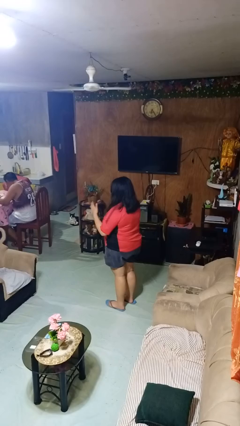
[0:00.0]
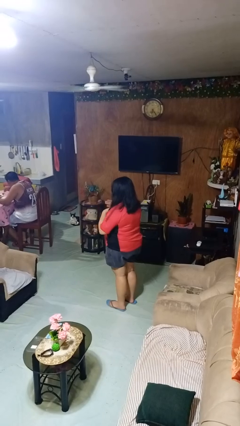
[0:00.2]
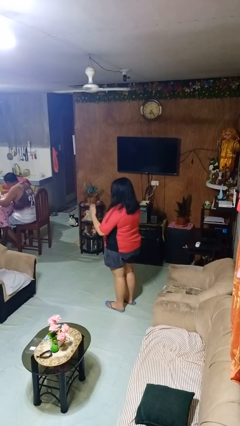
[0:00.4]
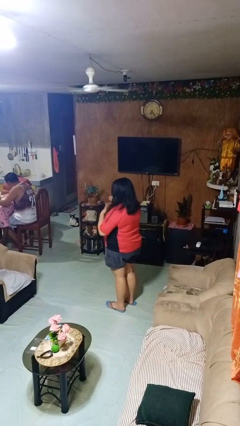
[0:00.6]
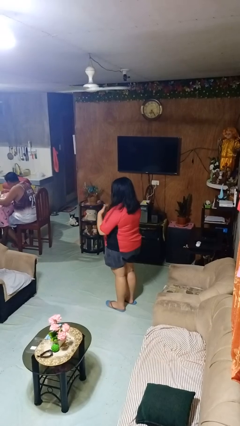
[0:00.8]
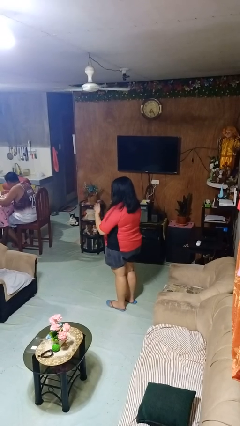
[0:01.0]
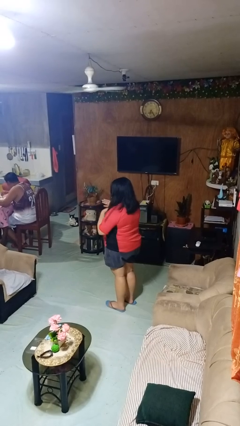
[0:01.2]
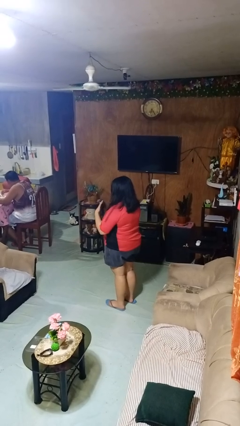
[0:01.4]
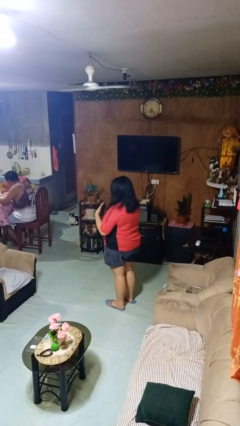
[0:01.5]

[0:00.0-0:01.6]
person drums on chest

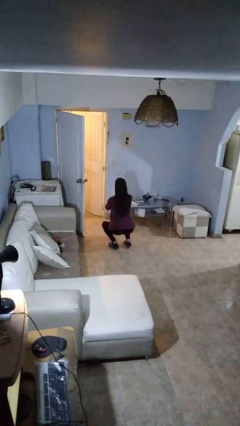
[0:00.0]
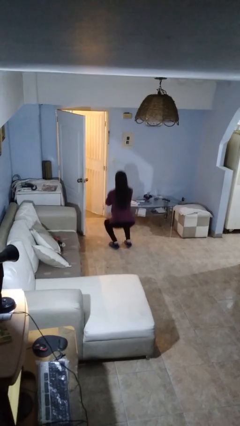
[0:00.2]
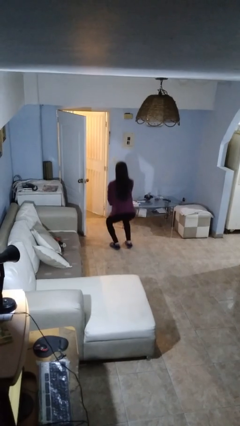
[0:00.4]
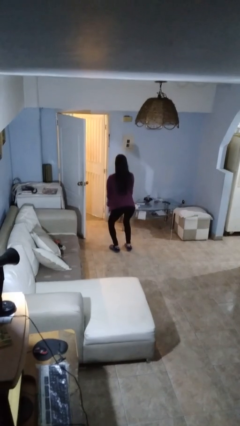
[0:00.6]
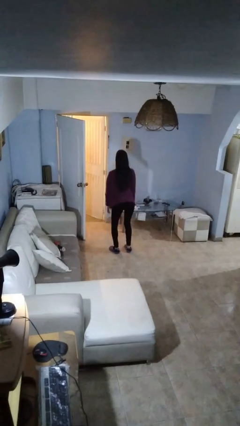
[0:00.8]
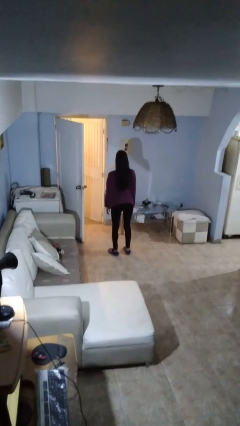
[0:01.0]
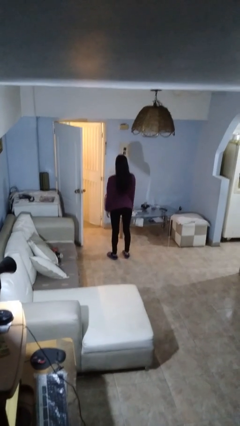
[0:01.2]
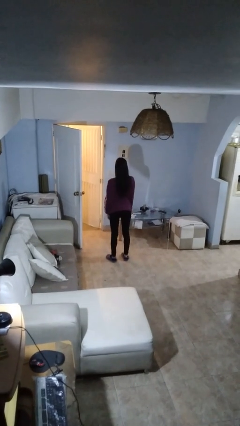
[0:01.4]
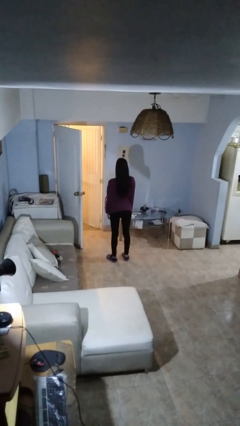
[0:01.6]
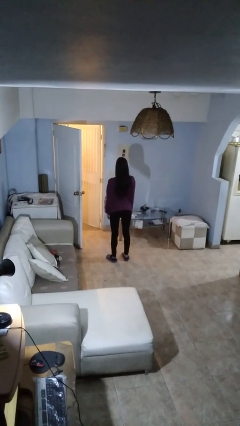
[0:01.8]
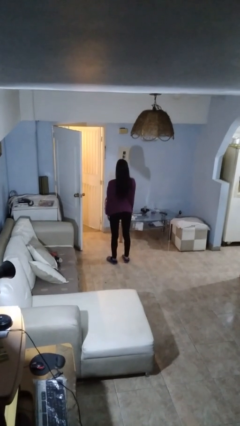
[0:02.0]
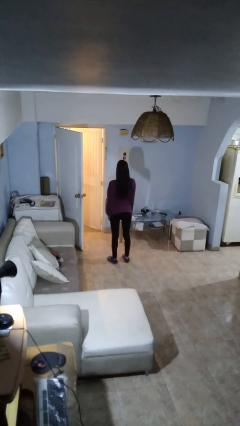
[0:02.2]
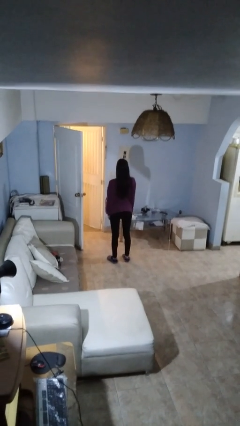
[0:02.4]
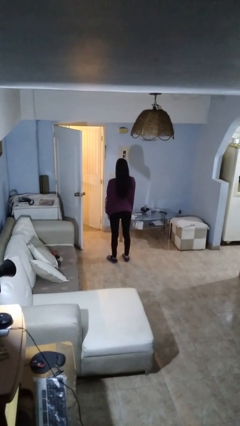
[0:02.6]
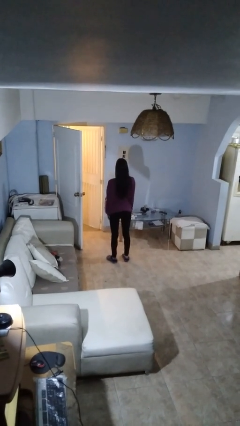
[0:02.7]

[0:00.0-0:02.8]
person stands up

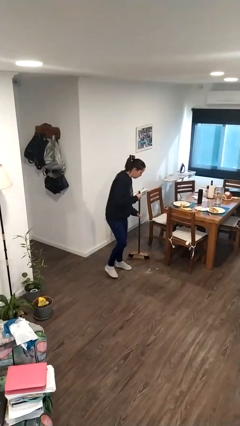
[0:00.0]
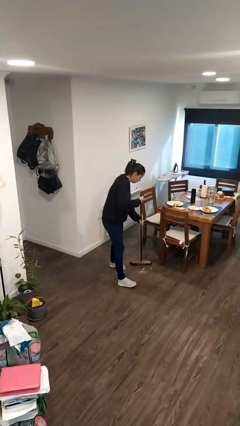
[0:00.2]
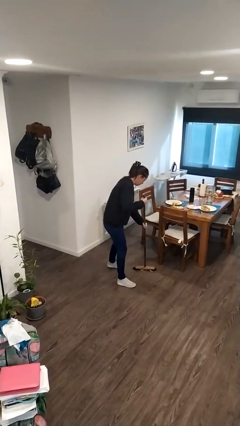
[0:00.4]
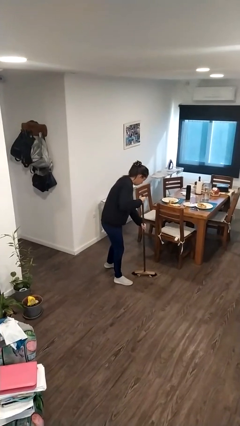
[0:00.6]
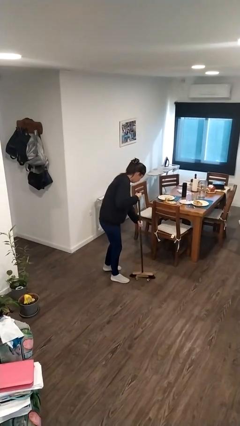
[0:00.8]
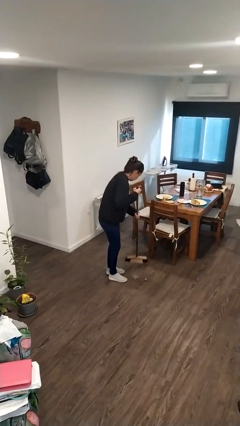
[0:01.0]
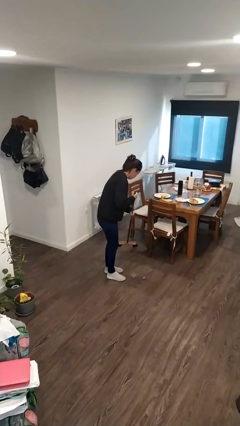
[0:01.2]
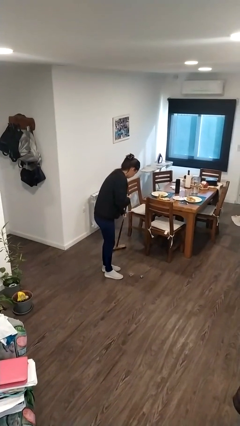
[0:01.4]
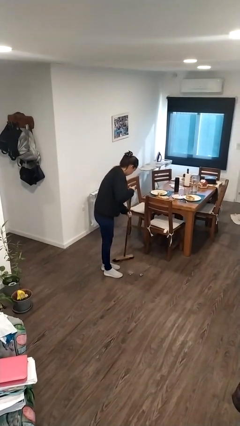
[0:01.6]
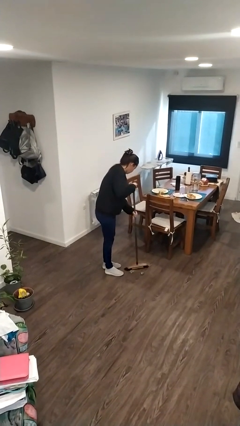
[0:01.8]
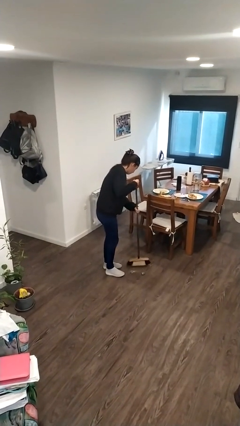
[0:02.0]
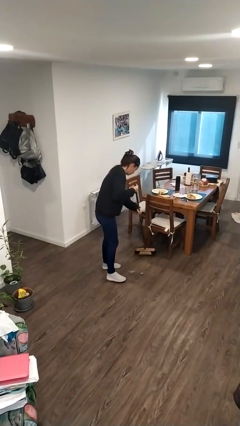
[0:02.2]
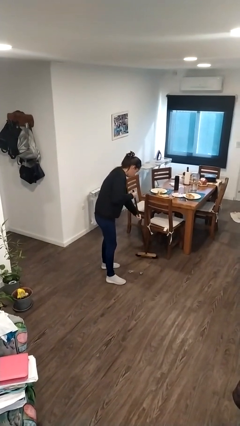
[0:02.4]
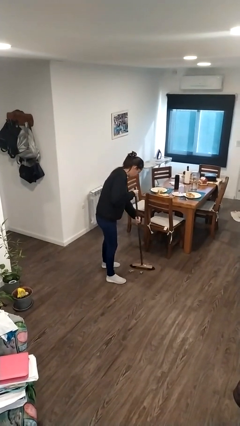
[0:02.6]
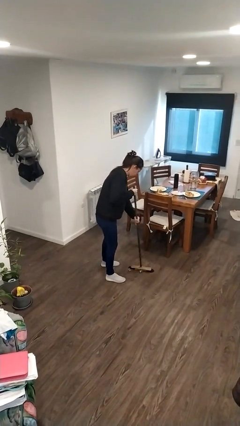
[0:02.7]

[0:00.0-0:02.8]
person sweeps floor

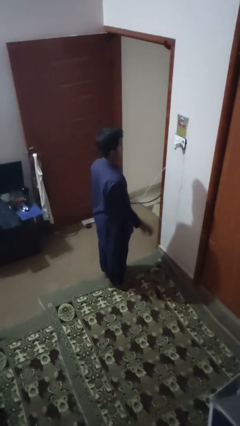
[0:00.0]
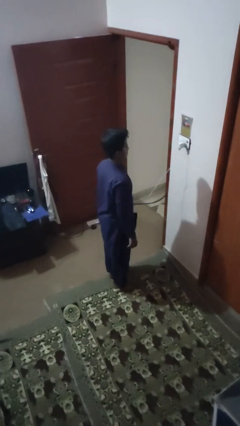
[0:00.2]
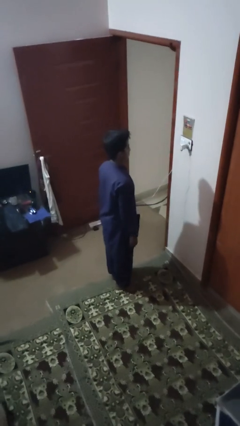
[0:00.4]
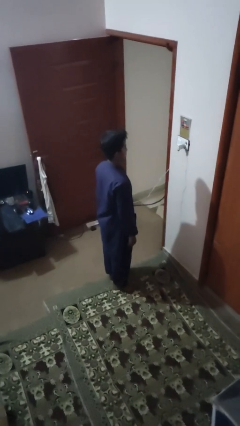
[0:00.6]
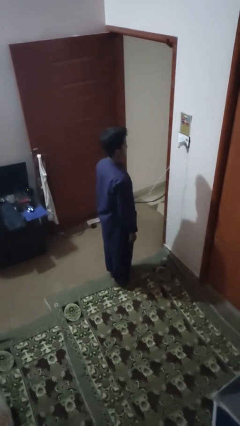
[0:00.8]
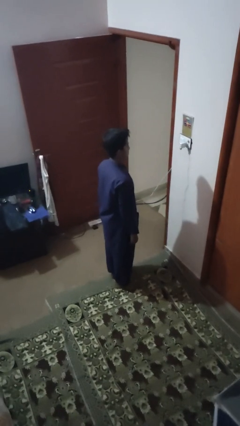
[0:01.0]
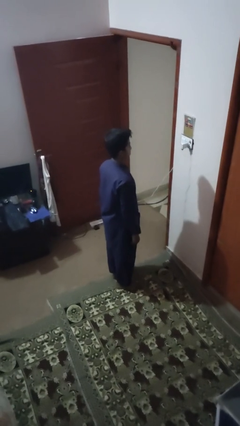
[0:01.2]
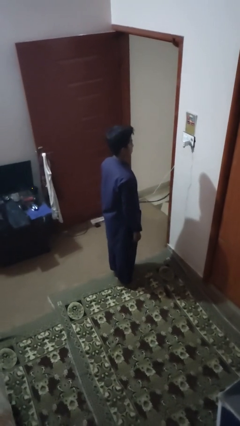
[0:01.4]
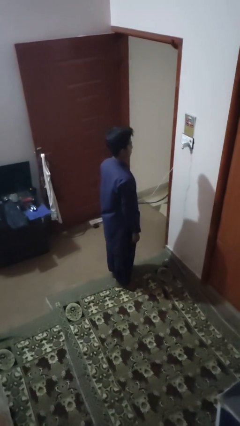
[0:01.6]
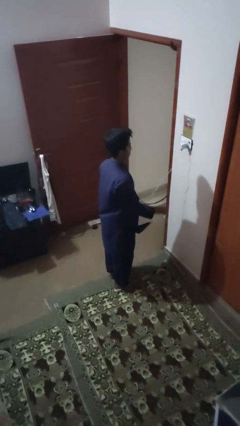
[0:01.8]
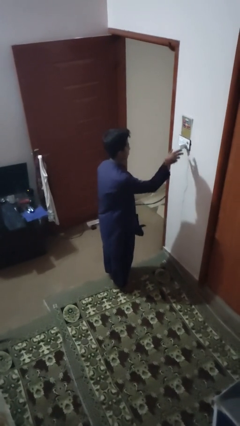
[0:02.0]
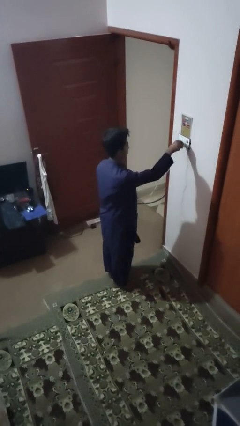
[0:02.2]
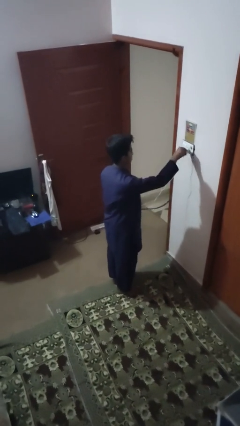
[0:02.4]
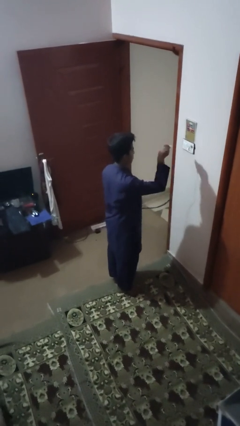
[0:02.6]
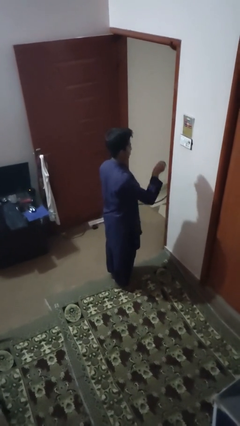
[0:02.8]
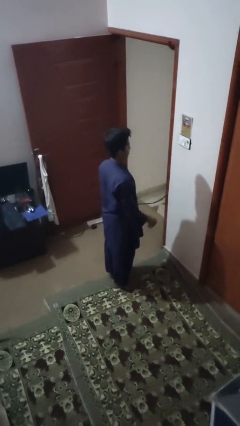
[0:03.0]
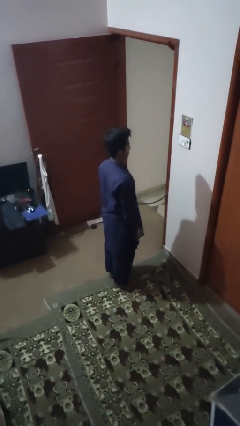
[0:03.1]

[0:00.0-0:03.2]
person unplugs from electrical socket

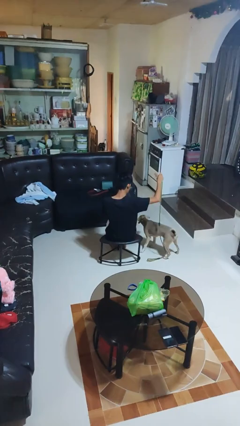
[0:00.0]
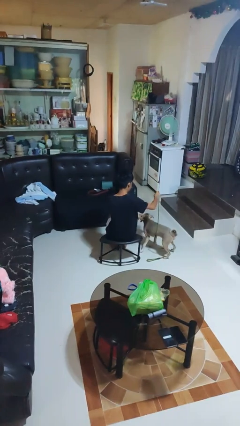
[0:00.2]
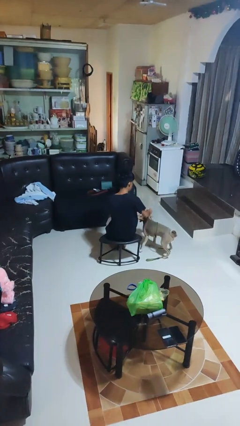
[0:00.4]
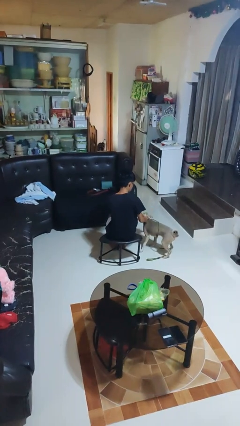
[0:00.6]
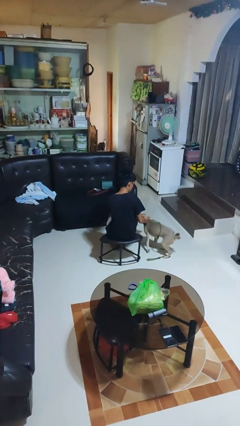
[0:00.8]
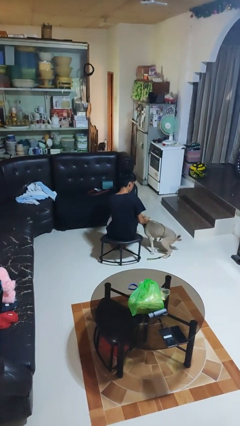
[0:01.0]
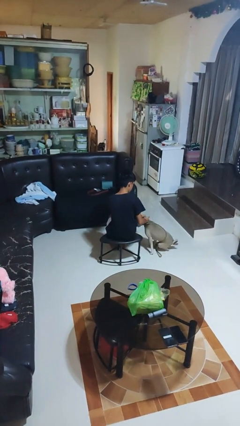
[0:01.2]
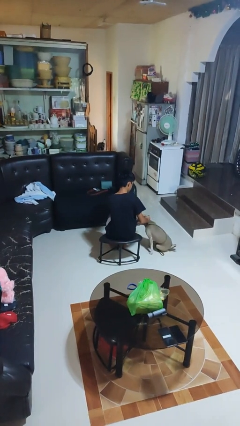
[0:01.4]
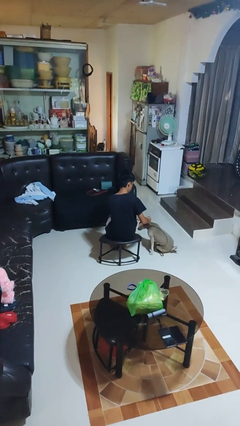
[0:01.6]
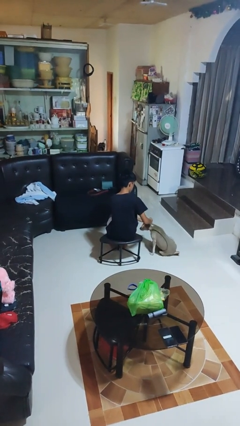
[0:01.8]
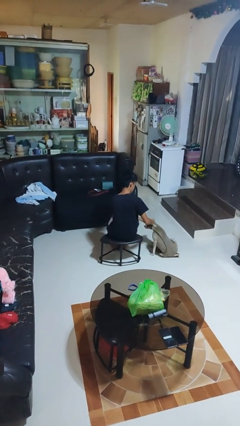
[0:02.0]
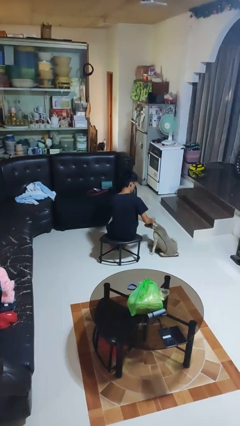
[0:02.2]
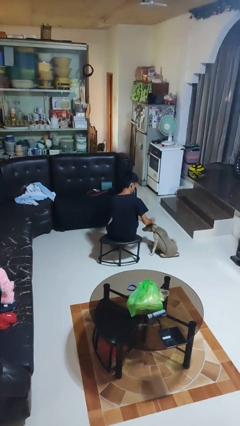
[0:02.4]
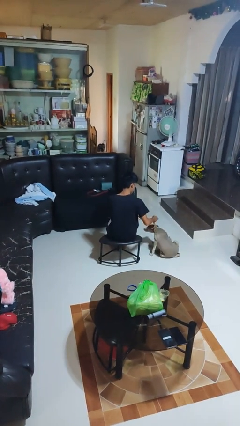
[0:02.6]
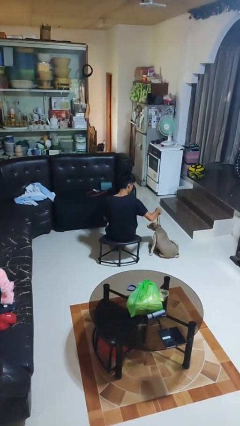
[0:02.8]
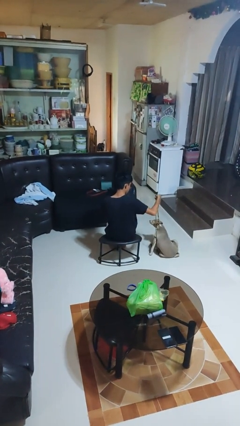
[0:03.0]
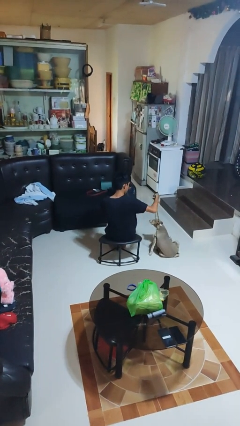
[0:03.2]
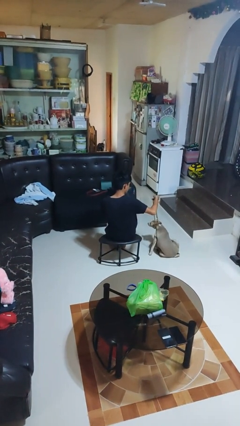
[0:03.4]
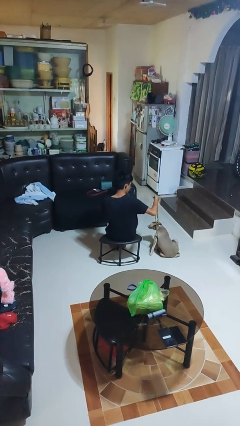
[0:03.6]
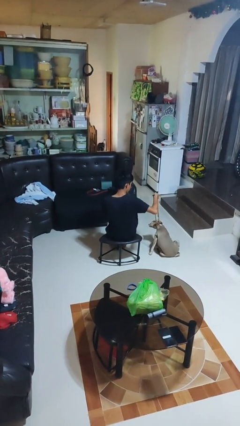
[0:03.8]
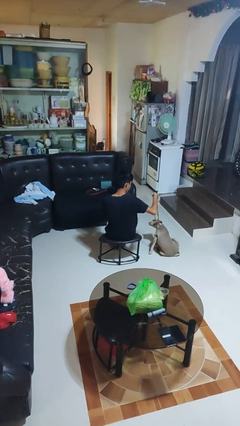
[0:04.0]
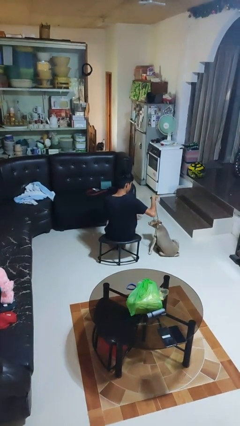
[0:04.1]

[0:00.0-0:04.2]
person attaches leash to dog

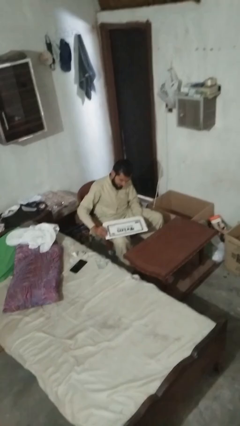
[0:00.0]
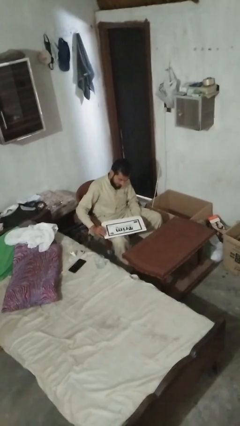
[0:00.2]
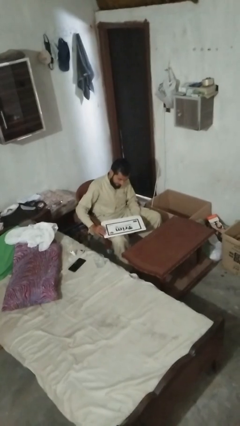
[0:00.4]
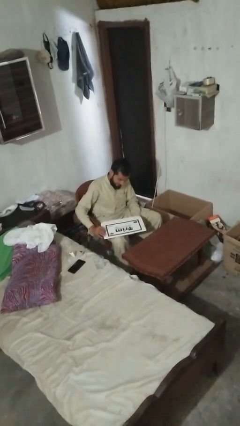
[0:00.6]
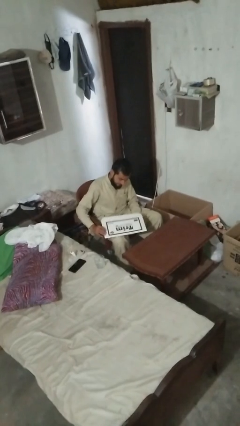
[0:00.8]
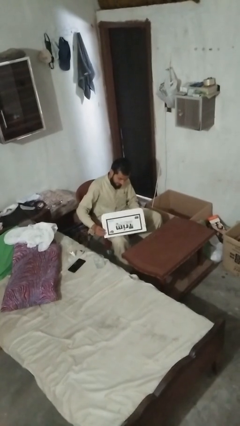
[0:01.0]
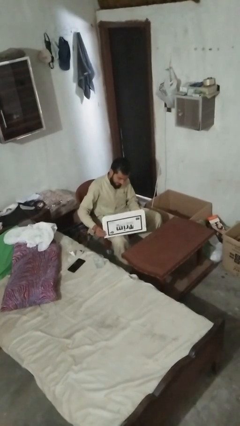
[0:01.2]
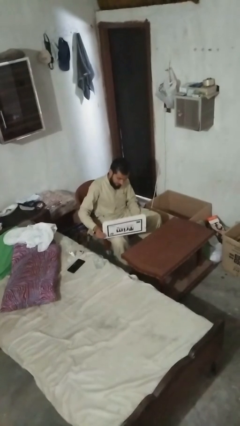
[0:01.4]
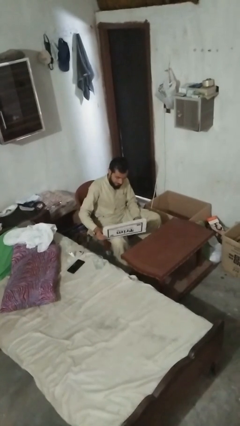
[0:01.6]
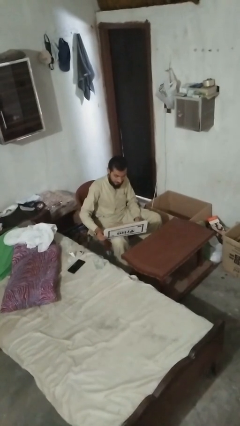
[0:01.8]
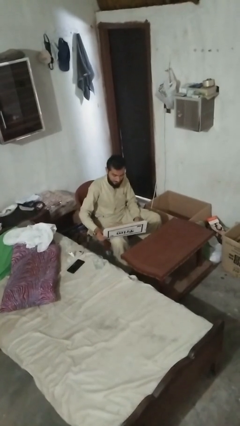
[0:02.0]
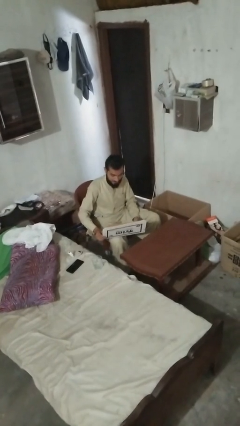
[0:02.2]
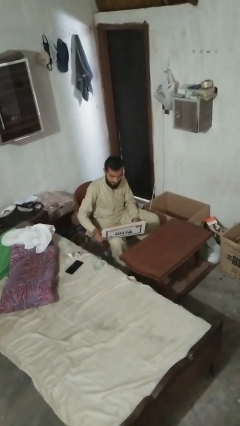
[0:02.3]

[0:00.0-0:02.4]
person opens laptop

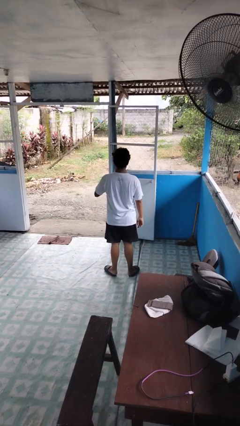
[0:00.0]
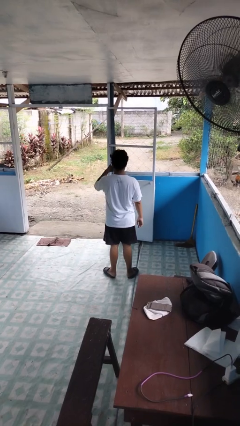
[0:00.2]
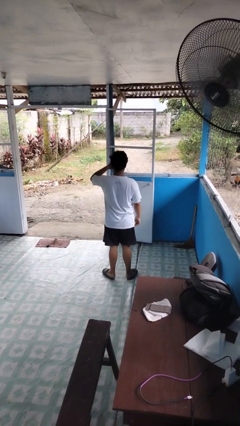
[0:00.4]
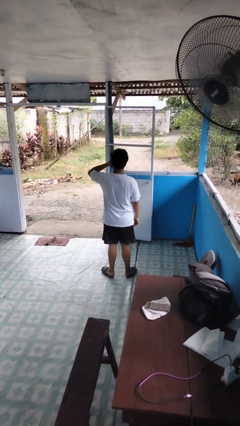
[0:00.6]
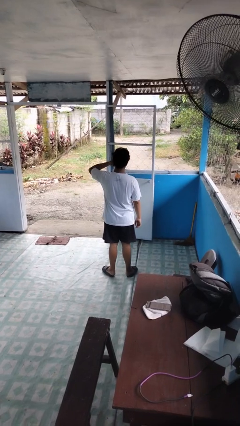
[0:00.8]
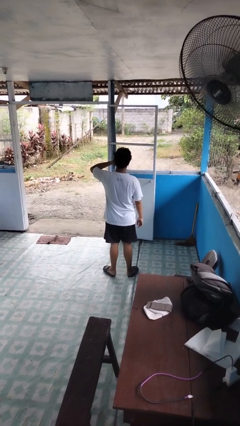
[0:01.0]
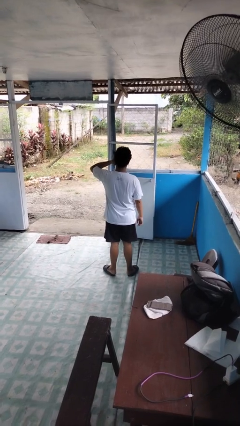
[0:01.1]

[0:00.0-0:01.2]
person gestures call me
